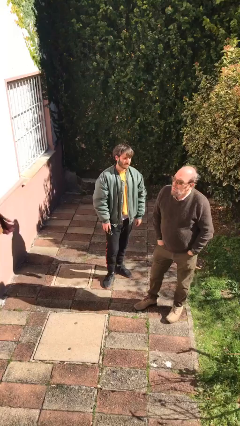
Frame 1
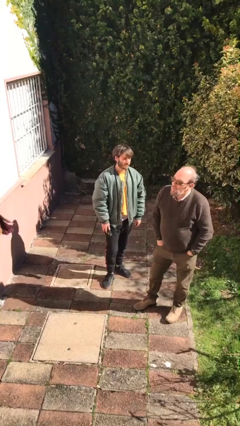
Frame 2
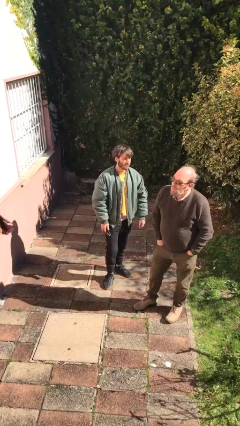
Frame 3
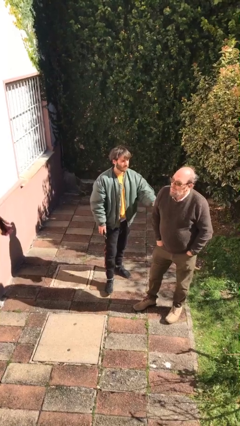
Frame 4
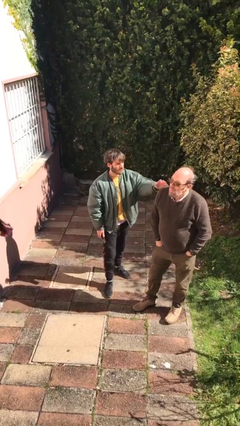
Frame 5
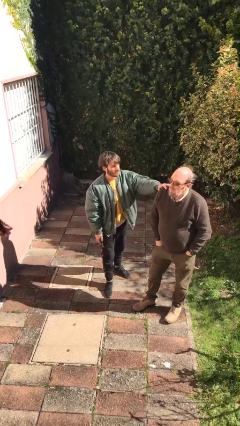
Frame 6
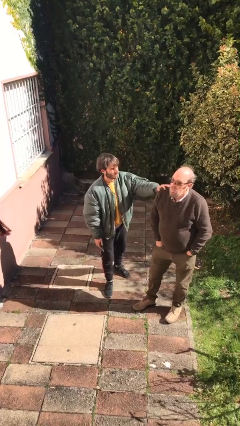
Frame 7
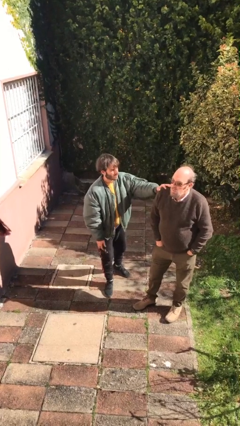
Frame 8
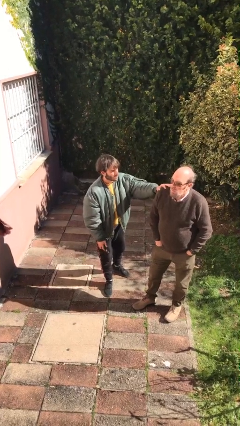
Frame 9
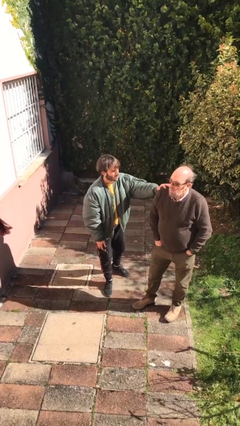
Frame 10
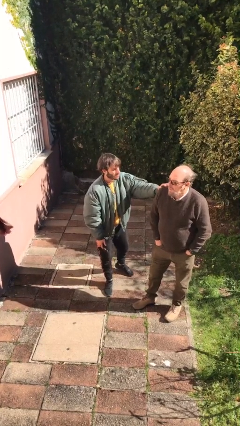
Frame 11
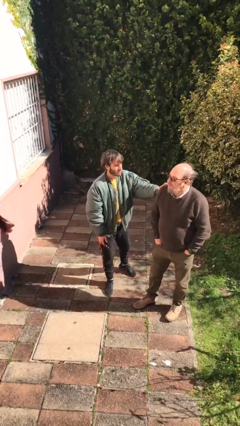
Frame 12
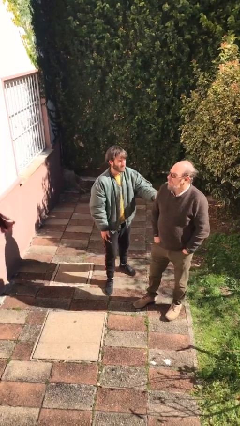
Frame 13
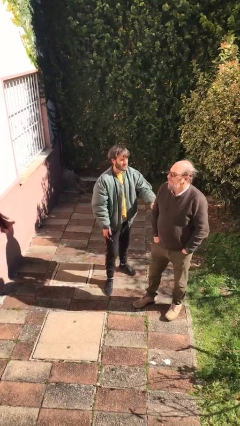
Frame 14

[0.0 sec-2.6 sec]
person touches back of person

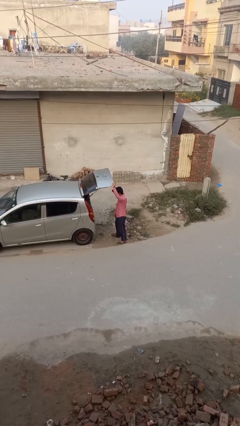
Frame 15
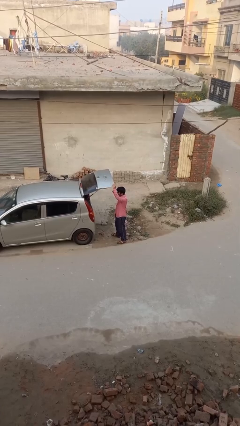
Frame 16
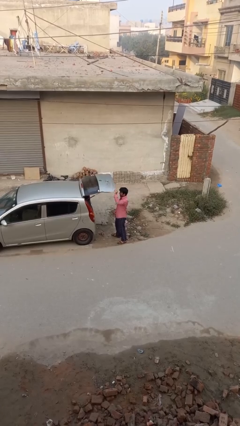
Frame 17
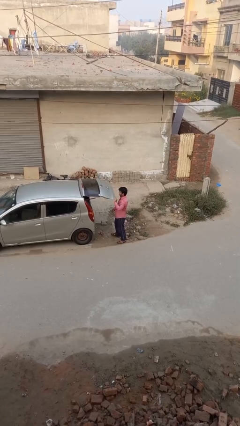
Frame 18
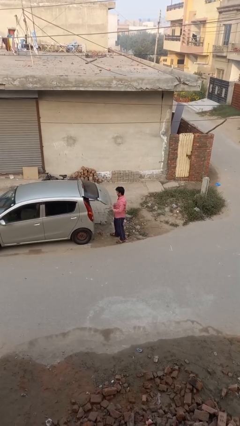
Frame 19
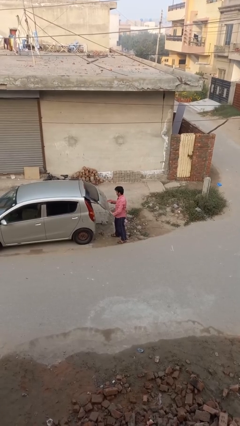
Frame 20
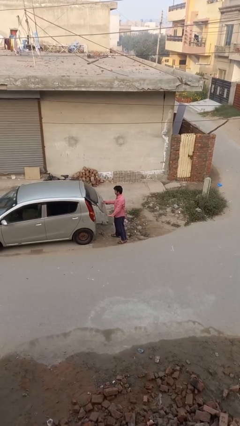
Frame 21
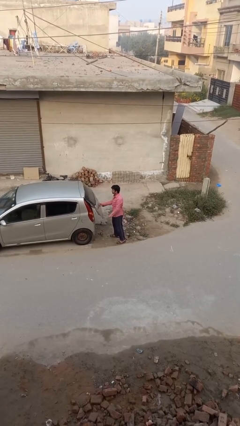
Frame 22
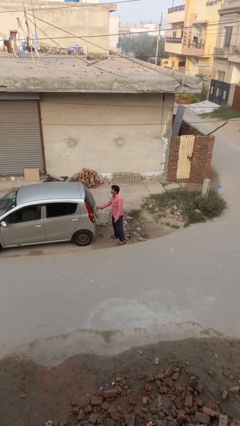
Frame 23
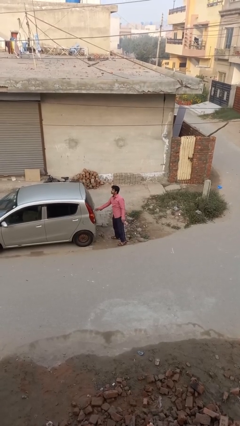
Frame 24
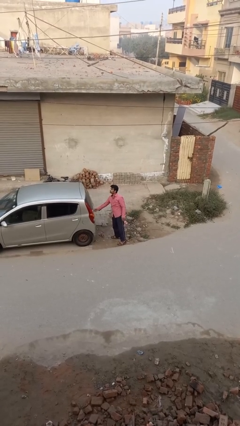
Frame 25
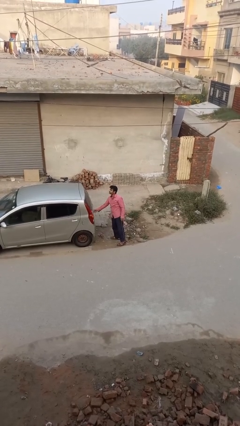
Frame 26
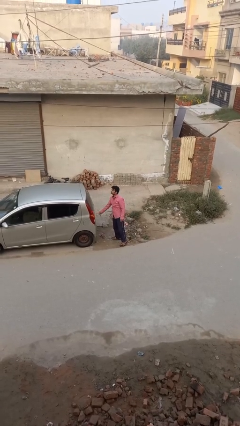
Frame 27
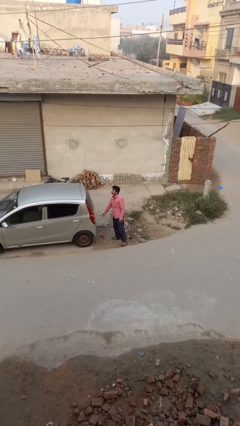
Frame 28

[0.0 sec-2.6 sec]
person closes car trunk

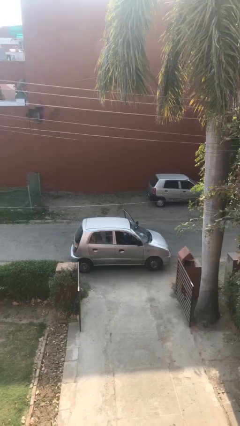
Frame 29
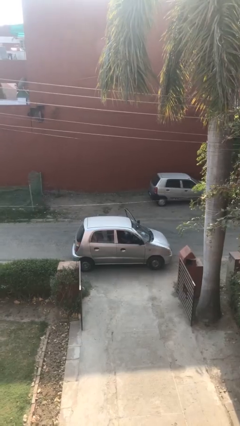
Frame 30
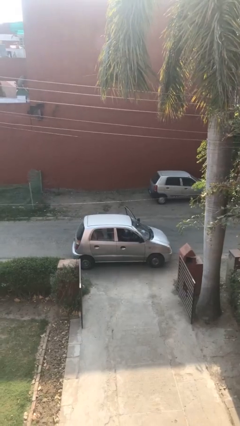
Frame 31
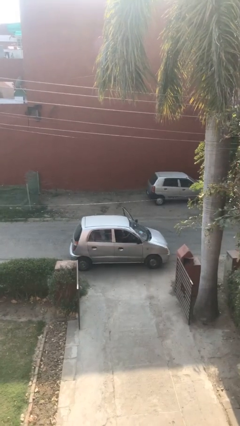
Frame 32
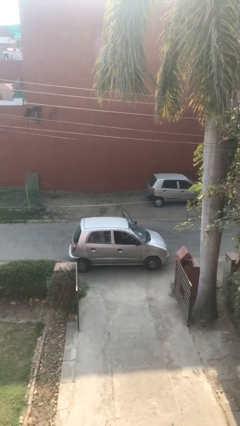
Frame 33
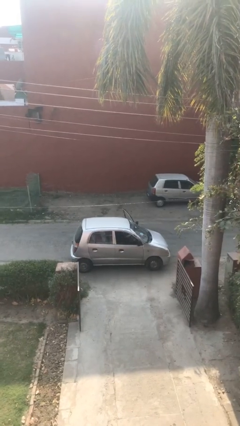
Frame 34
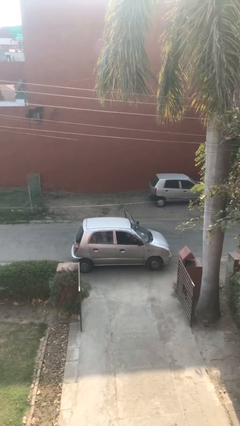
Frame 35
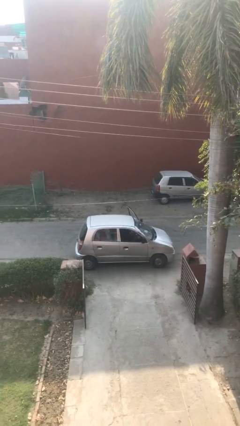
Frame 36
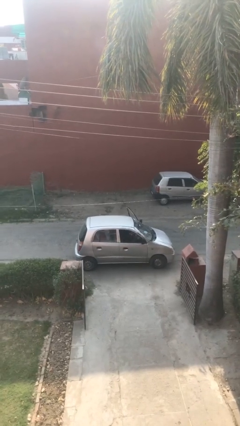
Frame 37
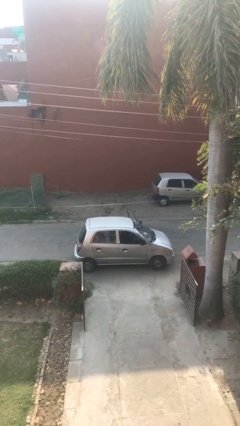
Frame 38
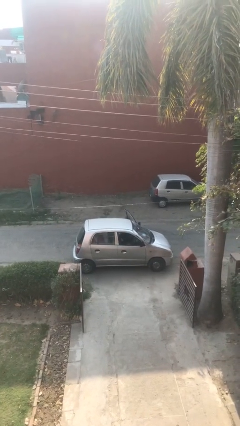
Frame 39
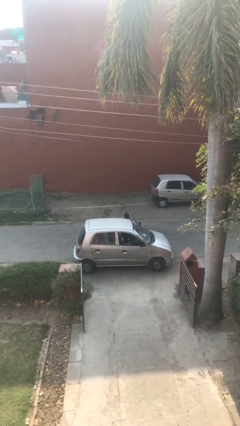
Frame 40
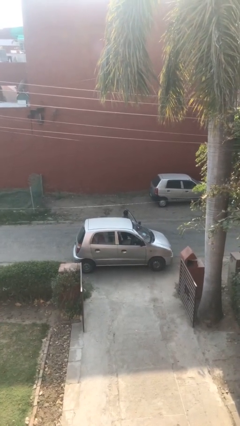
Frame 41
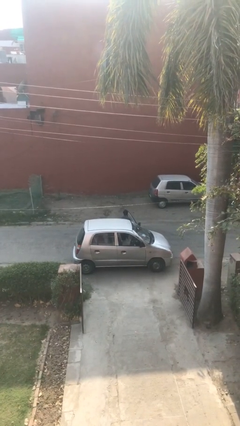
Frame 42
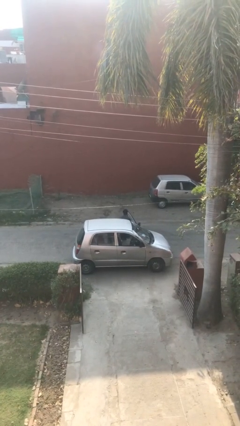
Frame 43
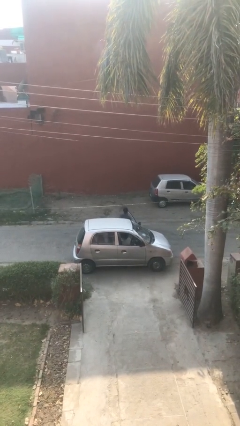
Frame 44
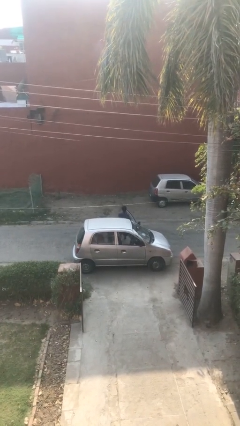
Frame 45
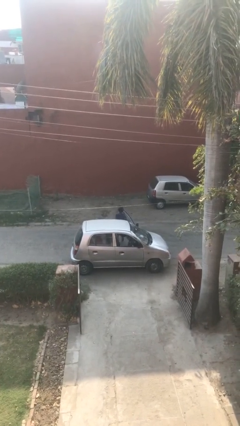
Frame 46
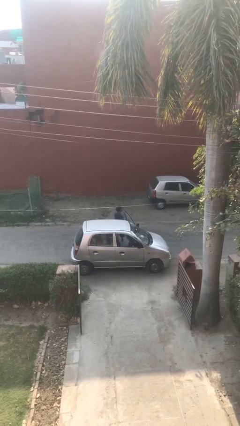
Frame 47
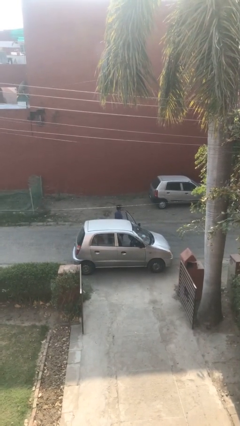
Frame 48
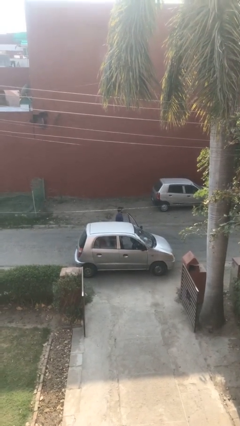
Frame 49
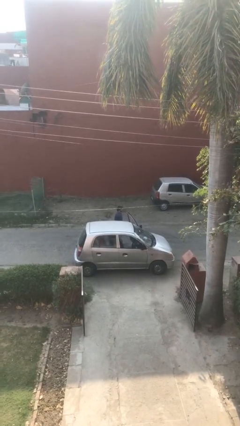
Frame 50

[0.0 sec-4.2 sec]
person exits car

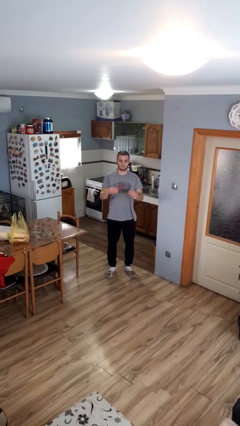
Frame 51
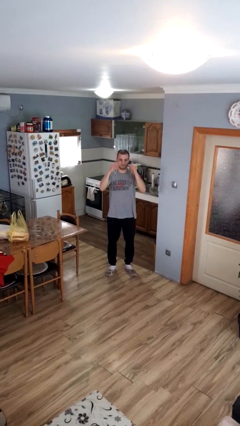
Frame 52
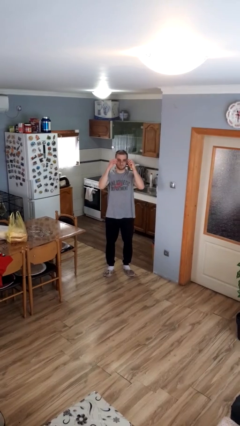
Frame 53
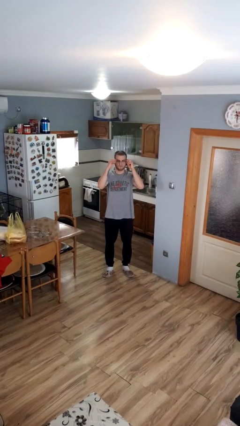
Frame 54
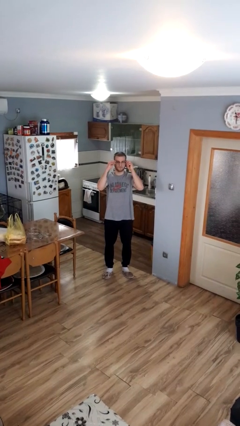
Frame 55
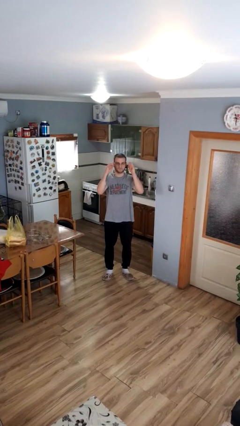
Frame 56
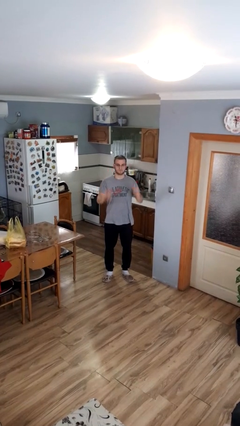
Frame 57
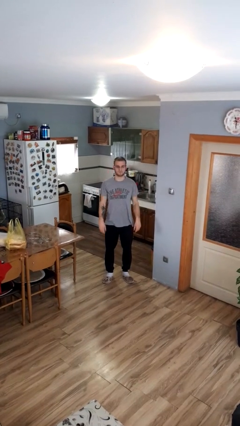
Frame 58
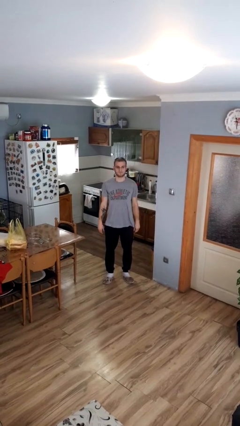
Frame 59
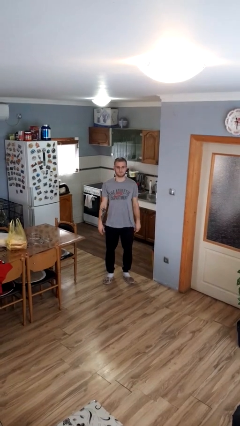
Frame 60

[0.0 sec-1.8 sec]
person puts on glasses

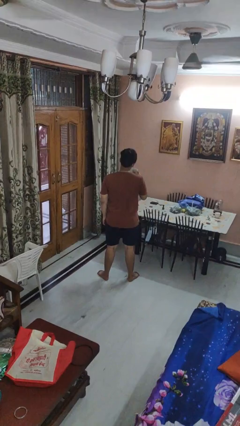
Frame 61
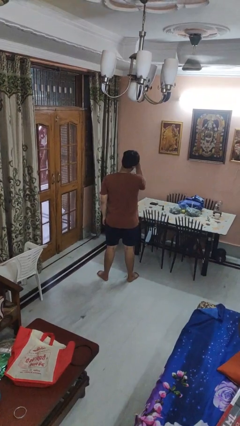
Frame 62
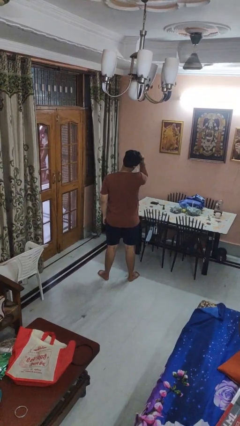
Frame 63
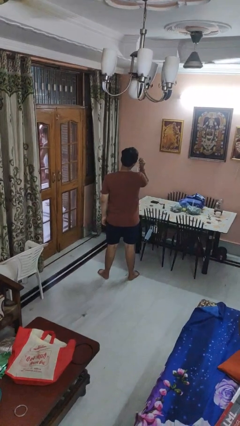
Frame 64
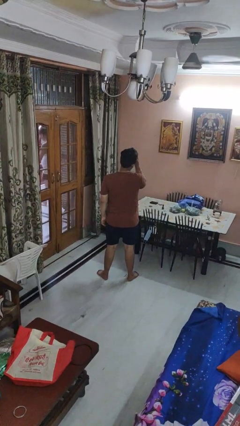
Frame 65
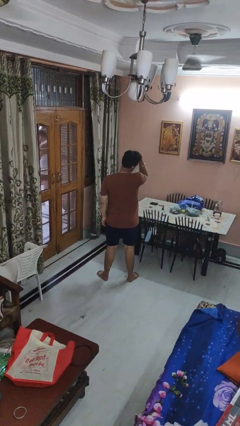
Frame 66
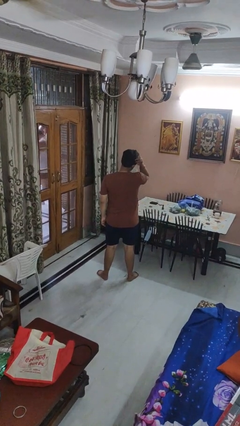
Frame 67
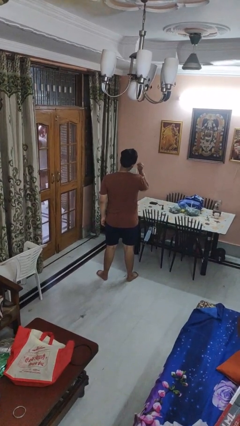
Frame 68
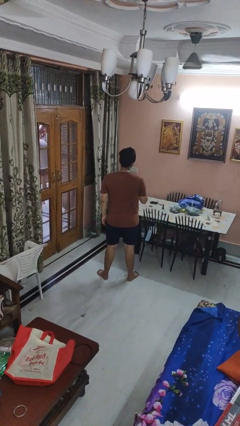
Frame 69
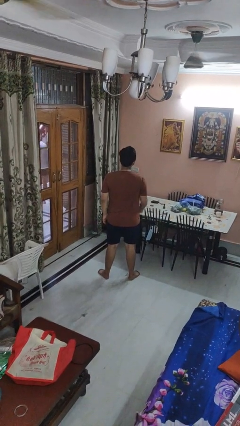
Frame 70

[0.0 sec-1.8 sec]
person strokes hair

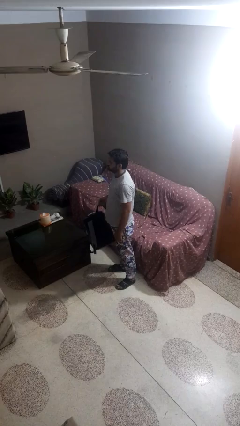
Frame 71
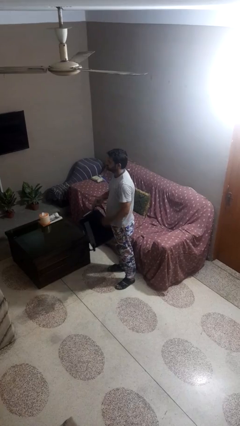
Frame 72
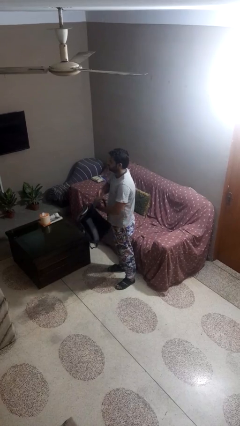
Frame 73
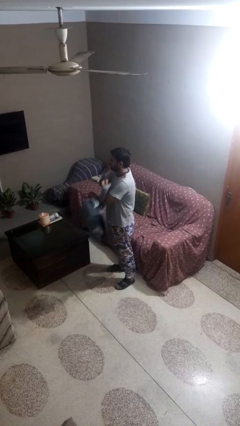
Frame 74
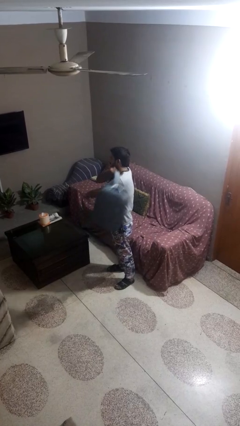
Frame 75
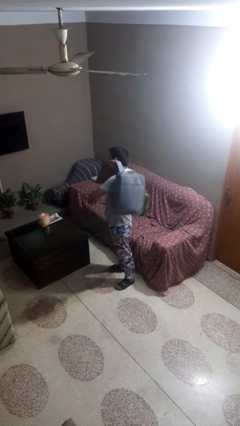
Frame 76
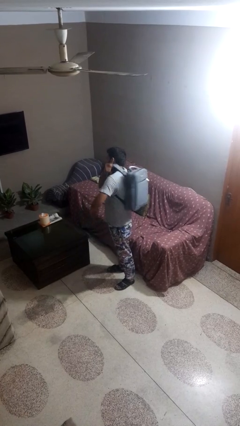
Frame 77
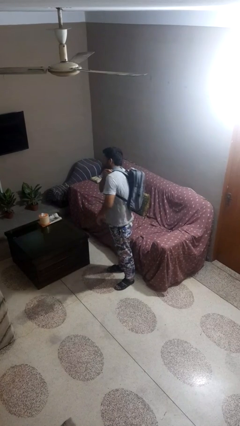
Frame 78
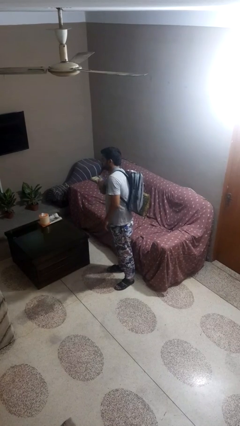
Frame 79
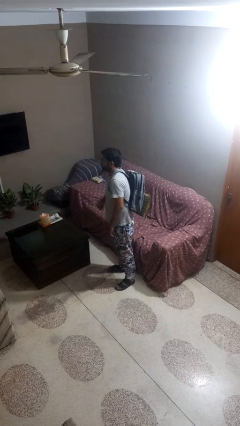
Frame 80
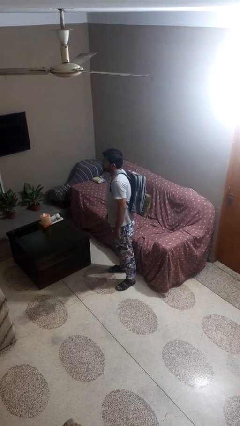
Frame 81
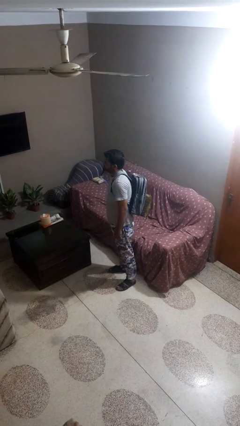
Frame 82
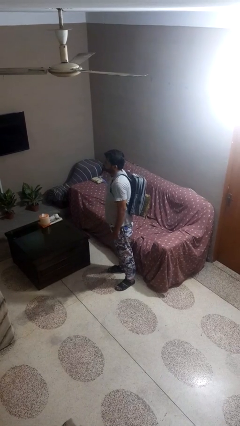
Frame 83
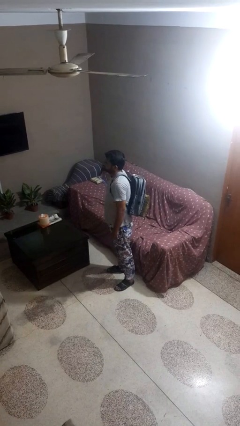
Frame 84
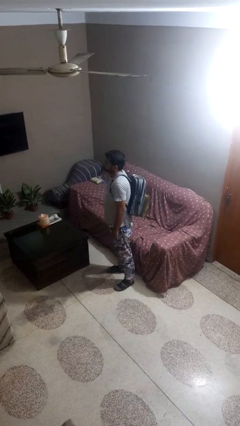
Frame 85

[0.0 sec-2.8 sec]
person puts on backpack

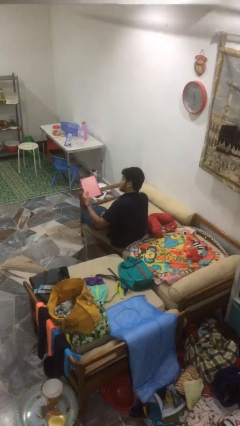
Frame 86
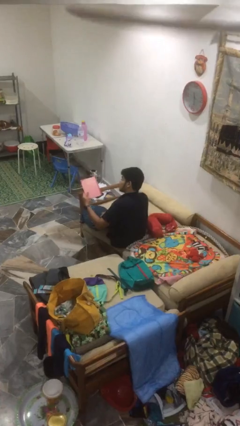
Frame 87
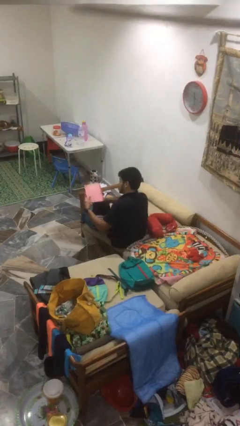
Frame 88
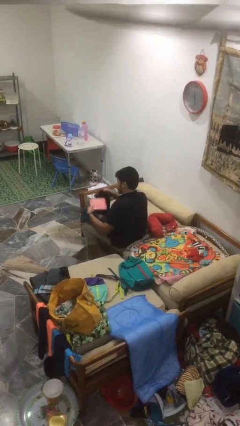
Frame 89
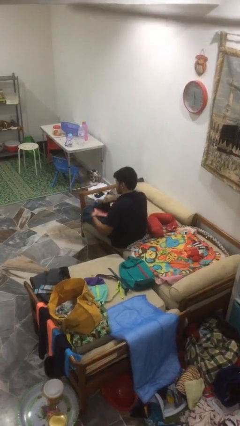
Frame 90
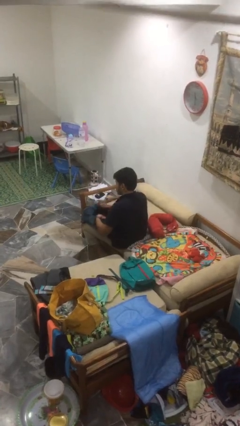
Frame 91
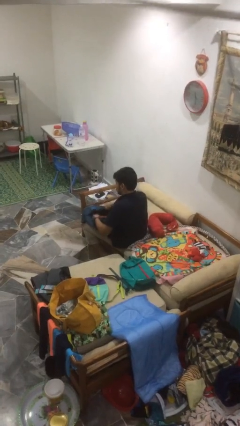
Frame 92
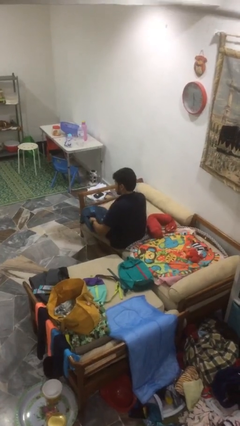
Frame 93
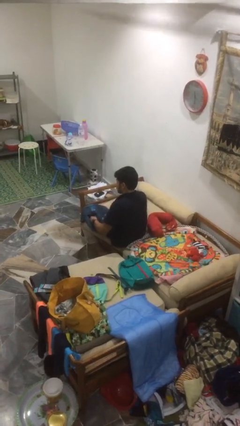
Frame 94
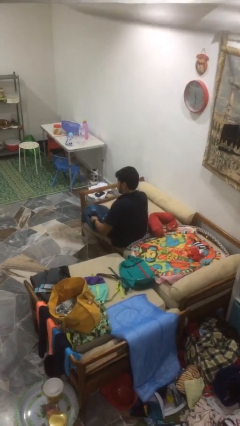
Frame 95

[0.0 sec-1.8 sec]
person puts object into bag
